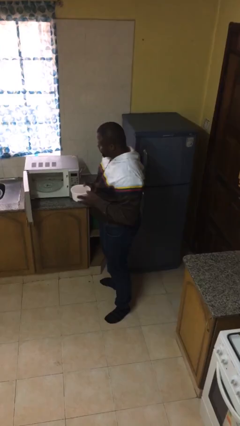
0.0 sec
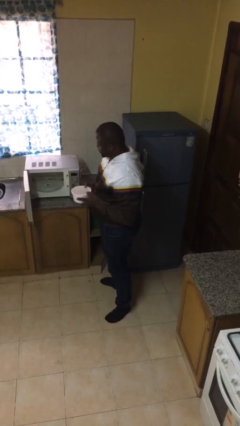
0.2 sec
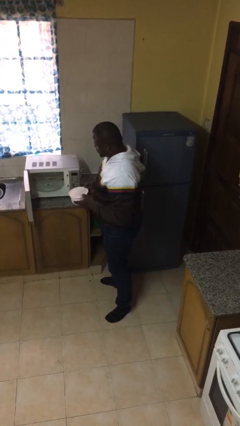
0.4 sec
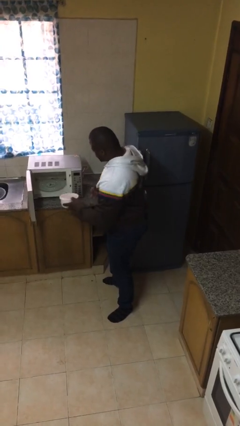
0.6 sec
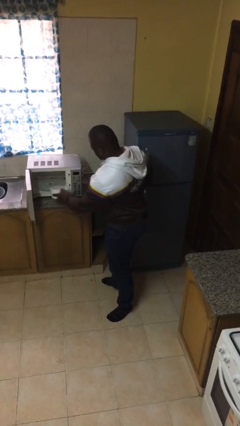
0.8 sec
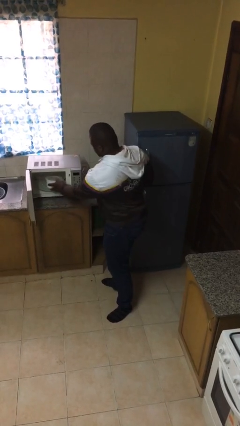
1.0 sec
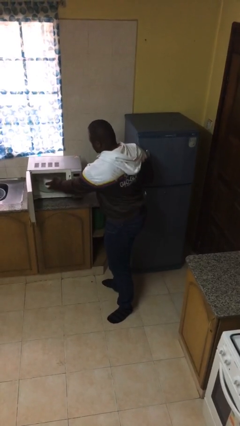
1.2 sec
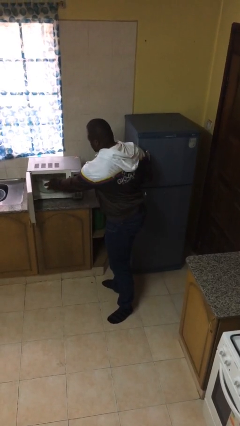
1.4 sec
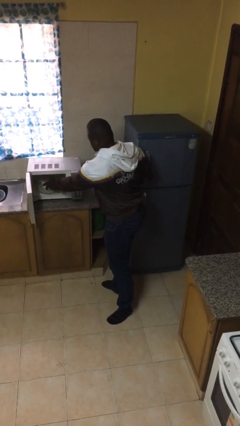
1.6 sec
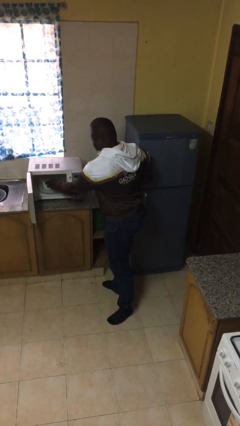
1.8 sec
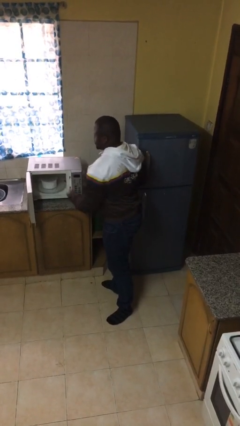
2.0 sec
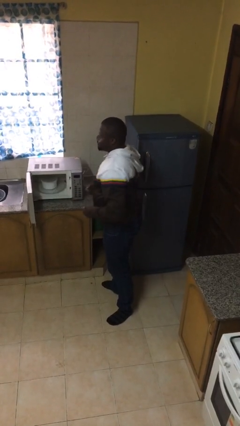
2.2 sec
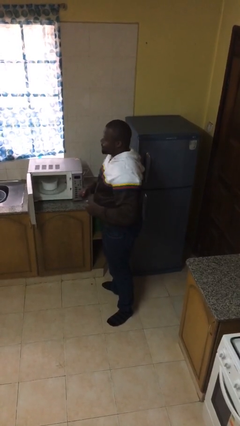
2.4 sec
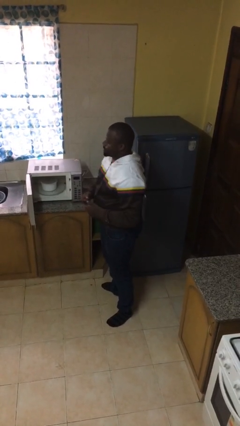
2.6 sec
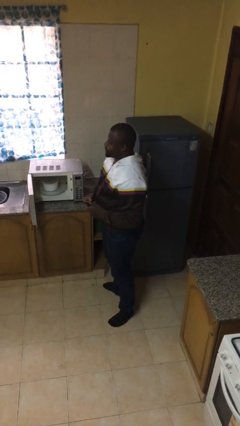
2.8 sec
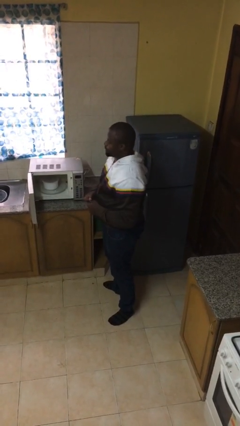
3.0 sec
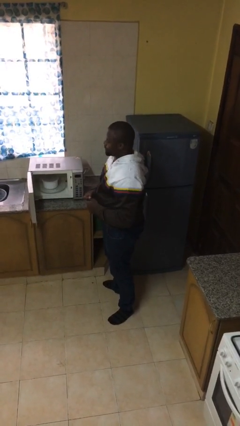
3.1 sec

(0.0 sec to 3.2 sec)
person puts object into microwave

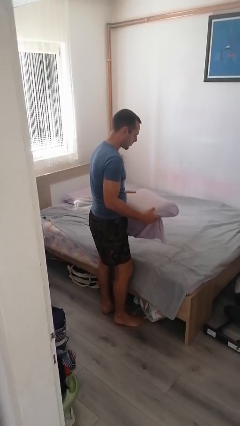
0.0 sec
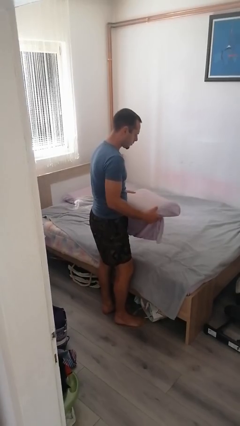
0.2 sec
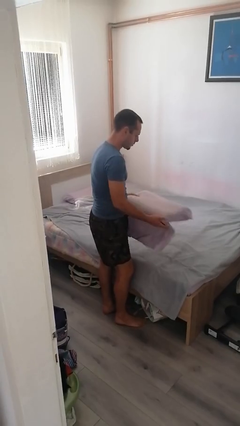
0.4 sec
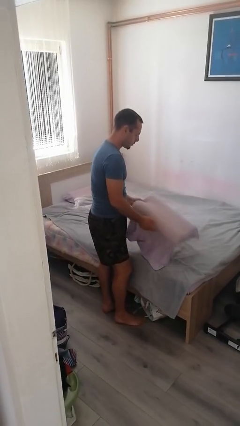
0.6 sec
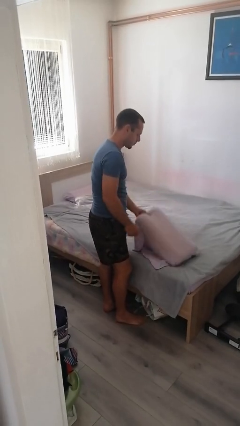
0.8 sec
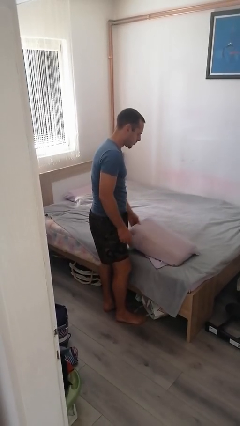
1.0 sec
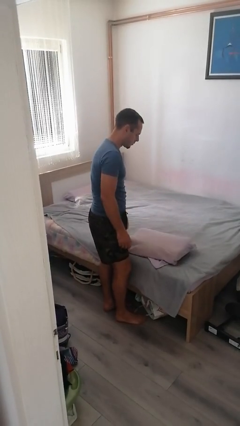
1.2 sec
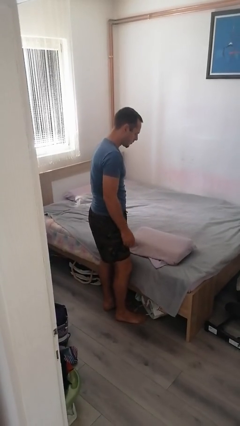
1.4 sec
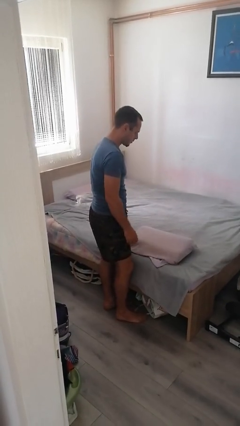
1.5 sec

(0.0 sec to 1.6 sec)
person puts down object on bed

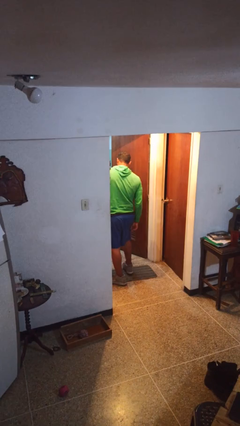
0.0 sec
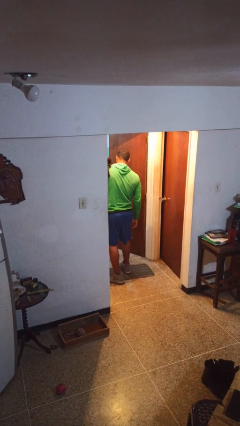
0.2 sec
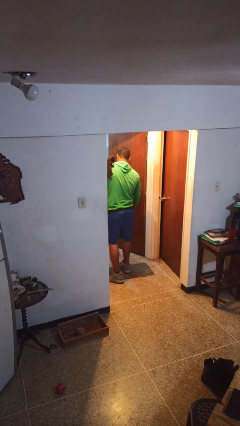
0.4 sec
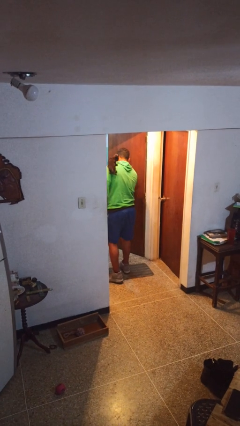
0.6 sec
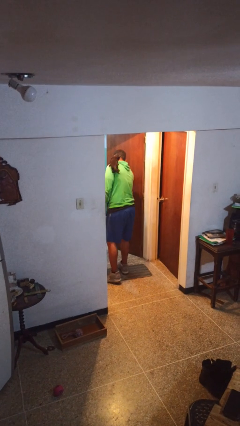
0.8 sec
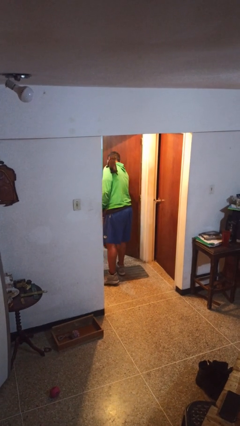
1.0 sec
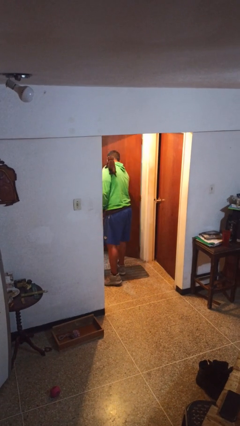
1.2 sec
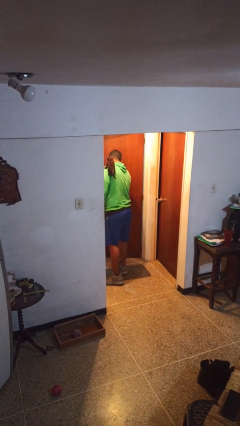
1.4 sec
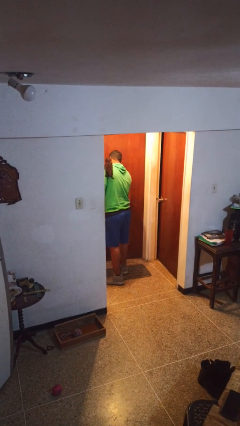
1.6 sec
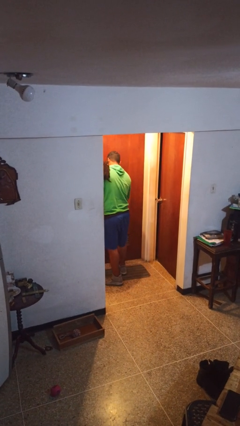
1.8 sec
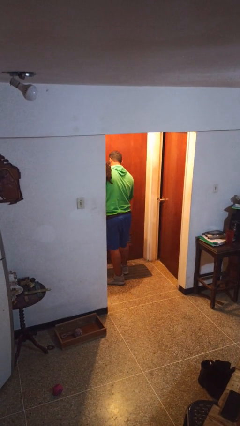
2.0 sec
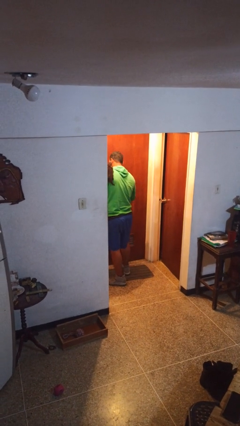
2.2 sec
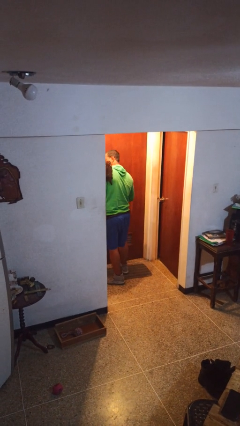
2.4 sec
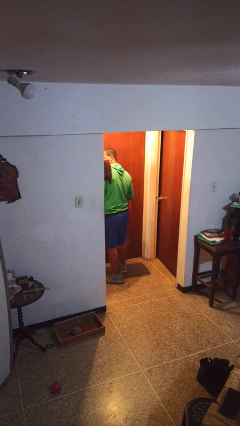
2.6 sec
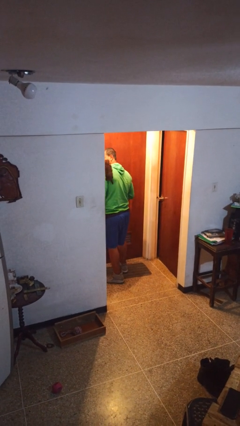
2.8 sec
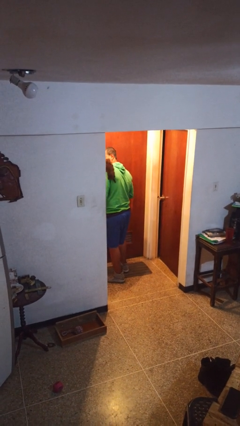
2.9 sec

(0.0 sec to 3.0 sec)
person closes facility door

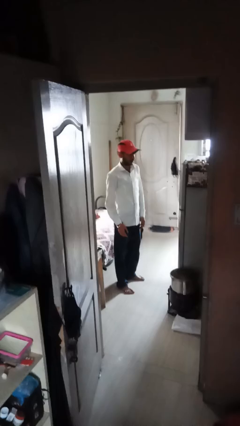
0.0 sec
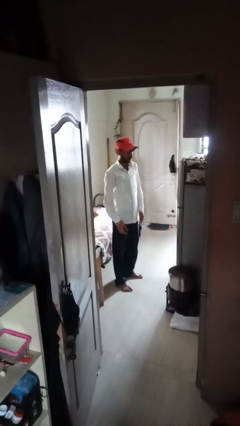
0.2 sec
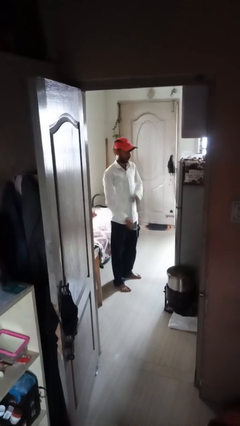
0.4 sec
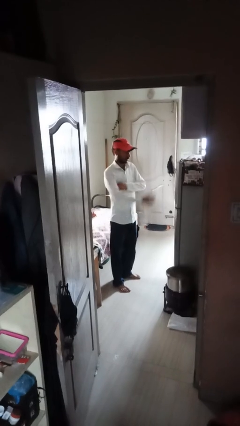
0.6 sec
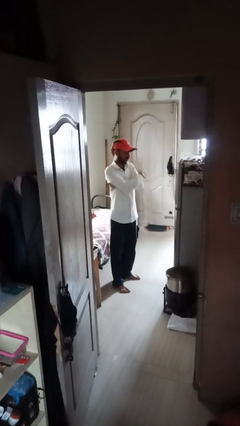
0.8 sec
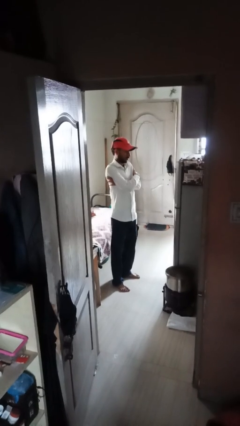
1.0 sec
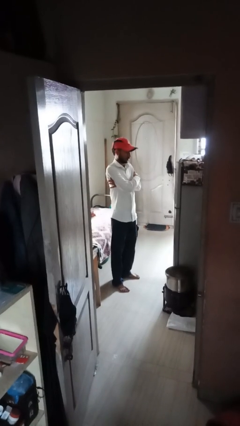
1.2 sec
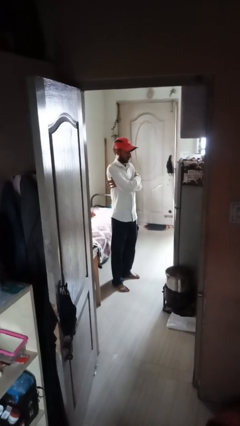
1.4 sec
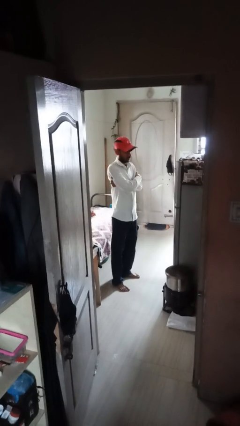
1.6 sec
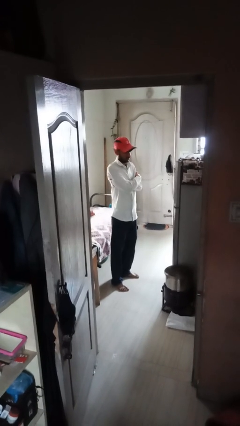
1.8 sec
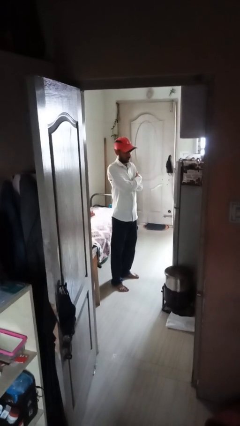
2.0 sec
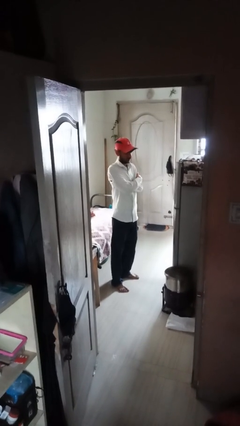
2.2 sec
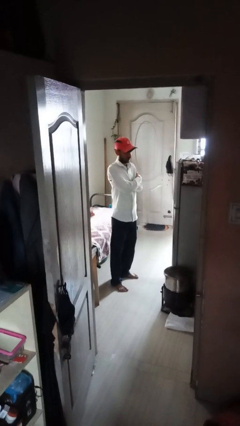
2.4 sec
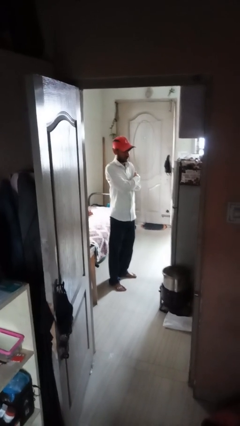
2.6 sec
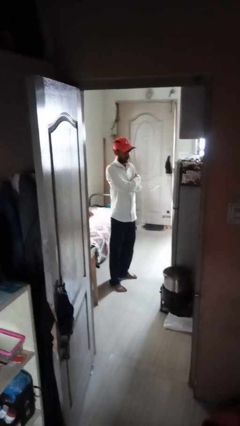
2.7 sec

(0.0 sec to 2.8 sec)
person crosses arms

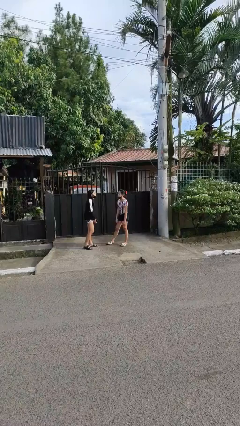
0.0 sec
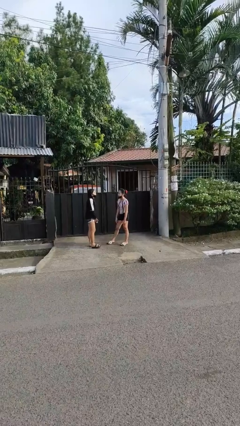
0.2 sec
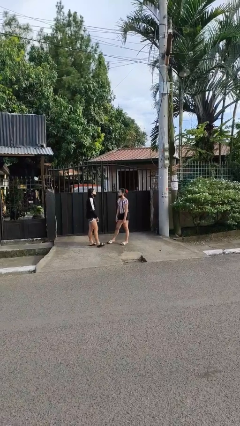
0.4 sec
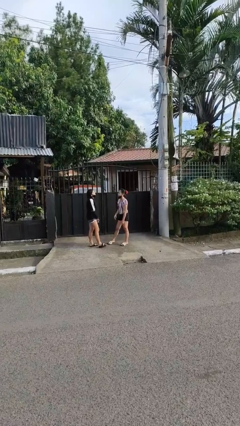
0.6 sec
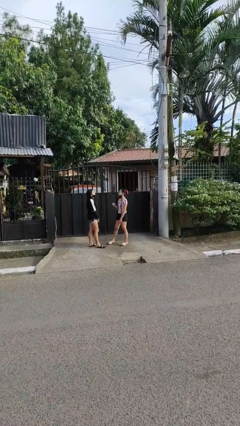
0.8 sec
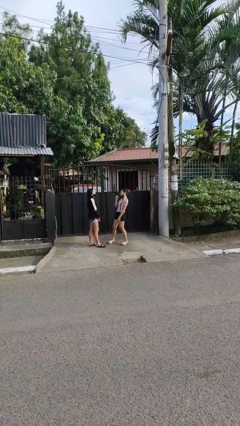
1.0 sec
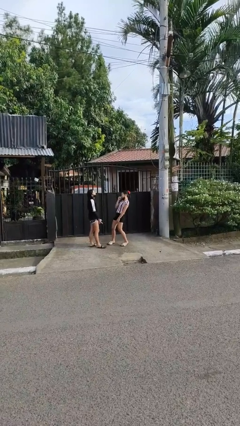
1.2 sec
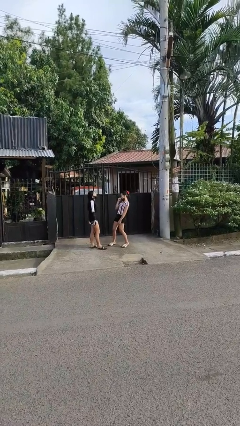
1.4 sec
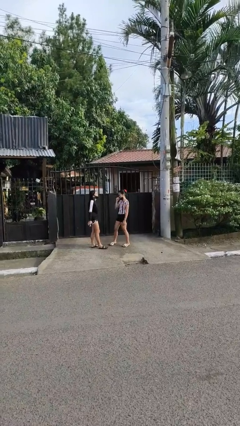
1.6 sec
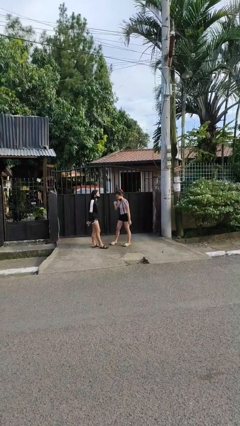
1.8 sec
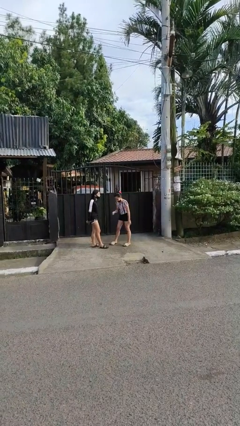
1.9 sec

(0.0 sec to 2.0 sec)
person laughs with person

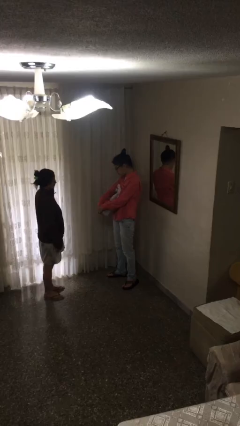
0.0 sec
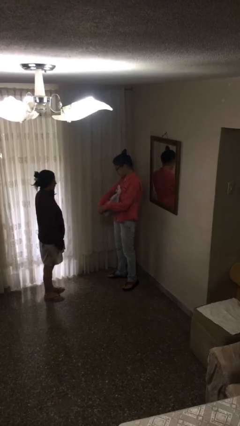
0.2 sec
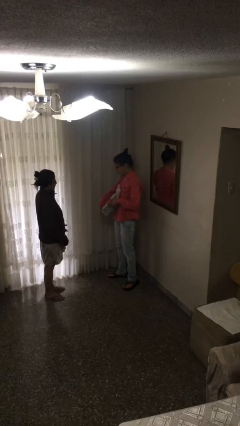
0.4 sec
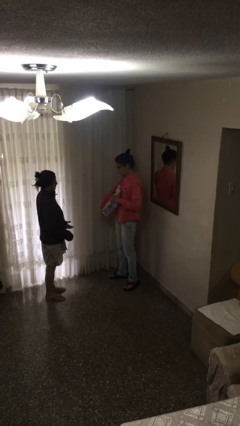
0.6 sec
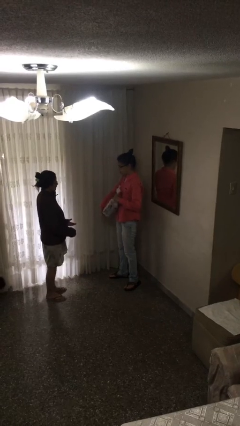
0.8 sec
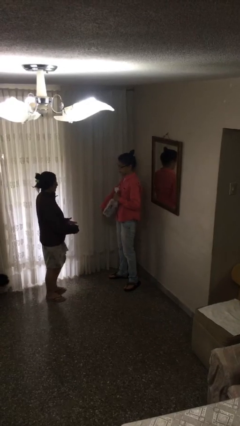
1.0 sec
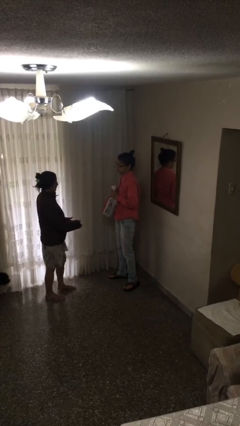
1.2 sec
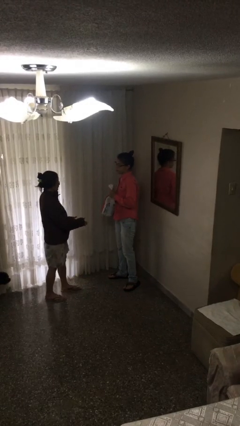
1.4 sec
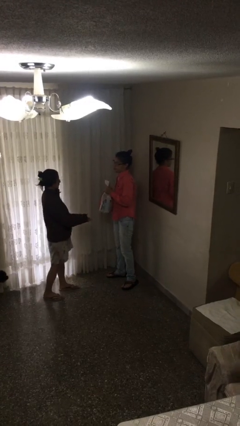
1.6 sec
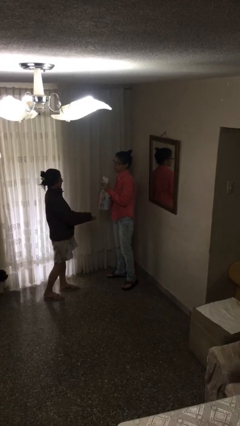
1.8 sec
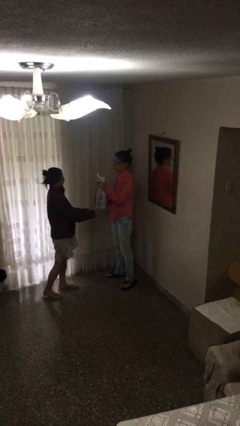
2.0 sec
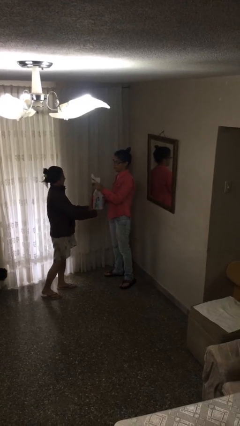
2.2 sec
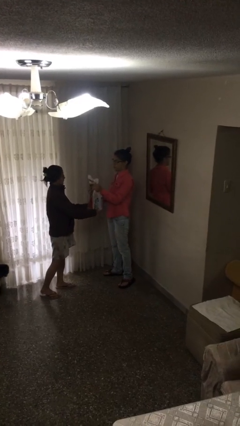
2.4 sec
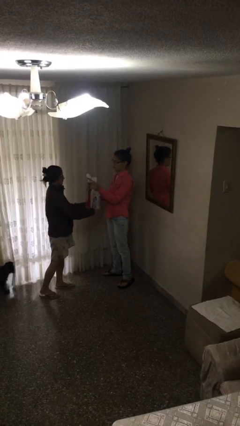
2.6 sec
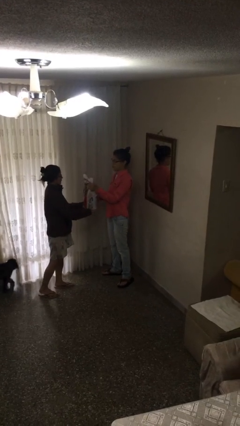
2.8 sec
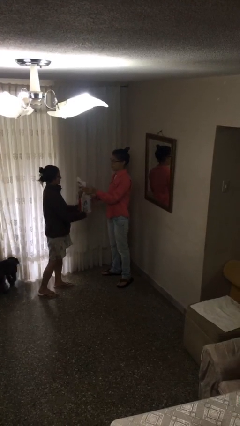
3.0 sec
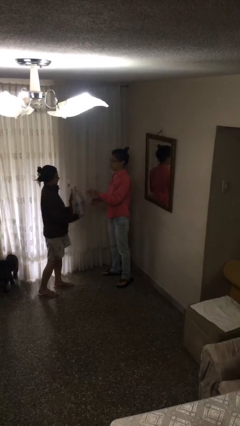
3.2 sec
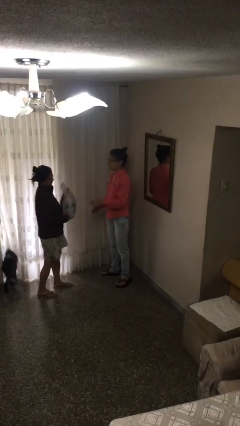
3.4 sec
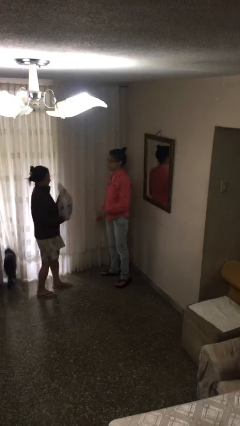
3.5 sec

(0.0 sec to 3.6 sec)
person transfers object to person

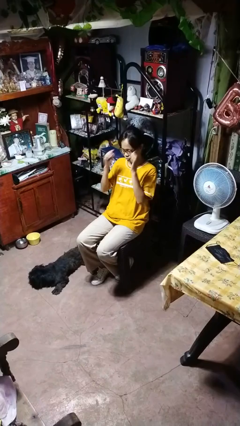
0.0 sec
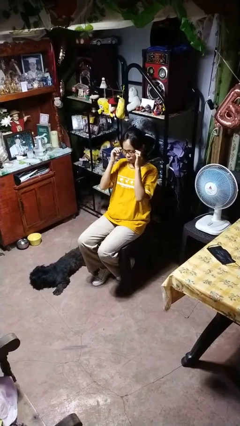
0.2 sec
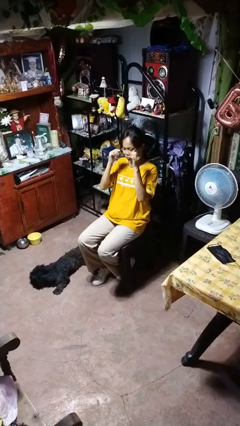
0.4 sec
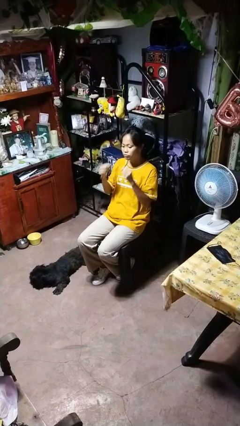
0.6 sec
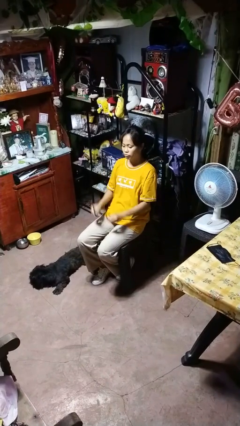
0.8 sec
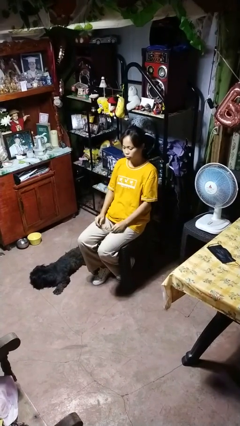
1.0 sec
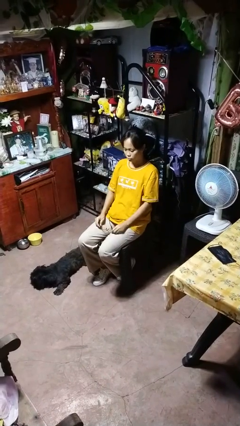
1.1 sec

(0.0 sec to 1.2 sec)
person takes off glasses
